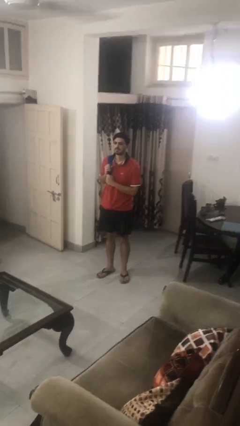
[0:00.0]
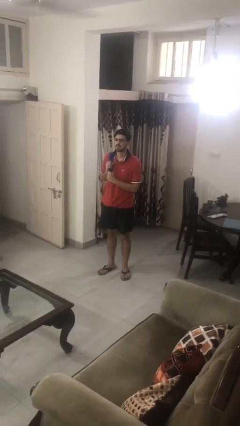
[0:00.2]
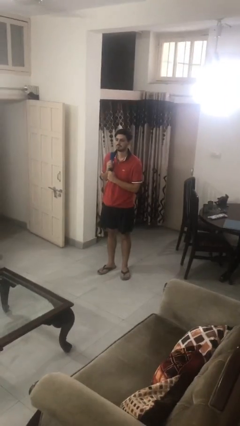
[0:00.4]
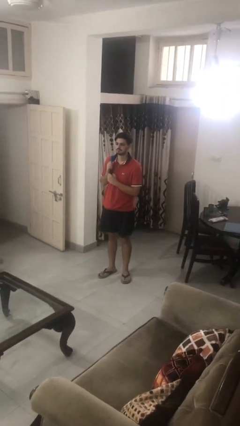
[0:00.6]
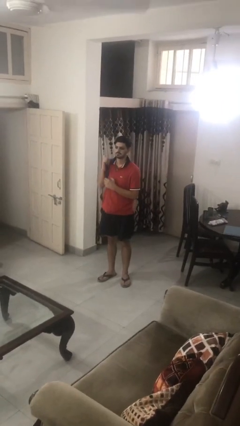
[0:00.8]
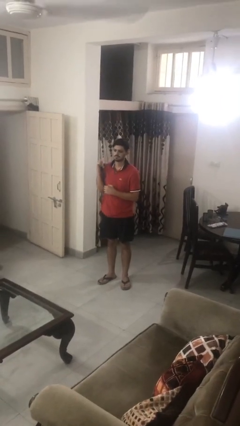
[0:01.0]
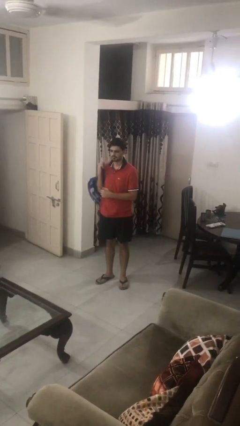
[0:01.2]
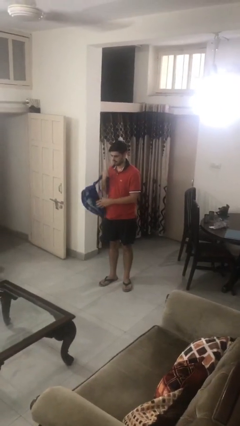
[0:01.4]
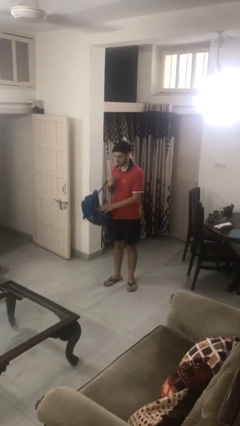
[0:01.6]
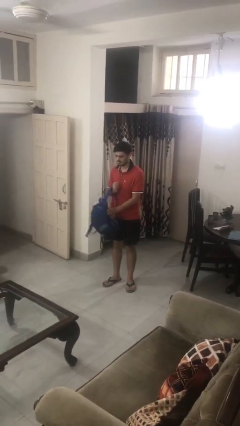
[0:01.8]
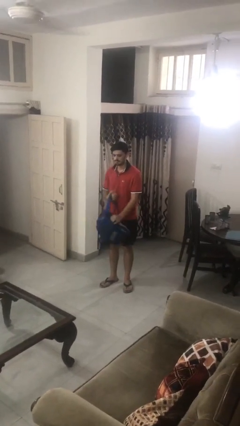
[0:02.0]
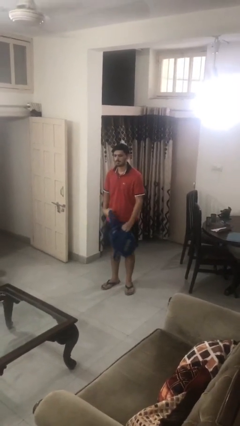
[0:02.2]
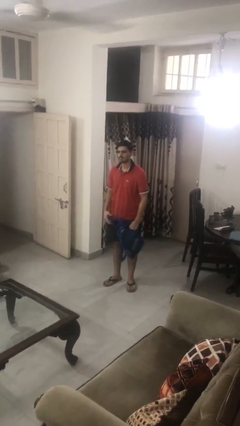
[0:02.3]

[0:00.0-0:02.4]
person takes off backpack

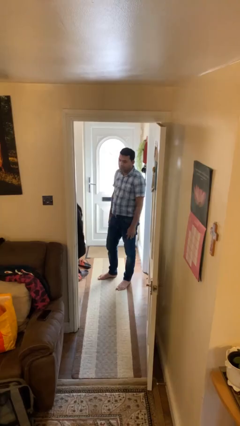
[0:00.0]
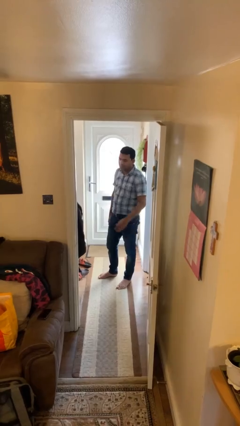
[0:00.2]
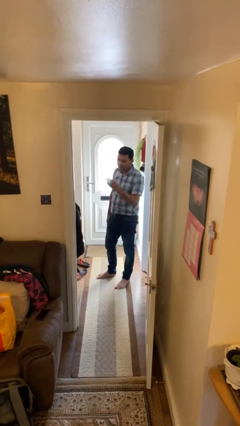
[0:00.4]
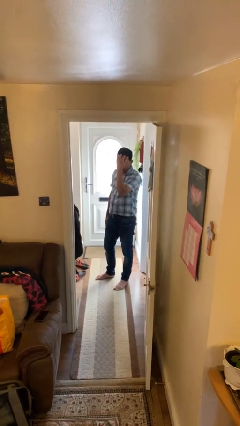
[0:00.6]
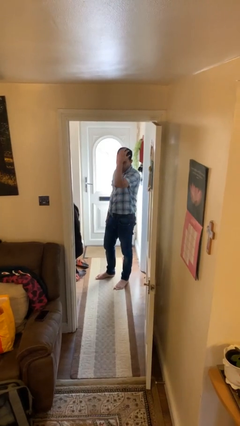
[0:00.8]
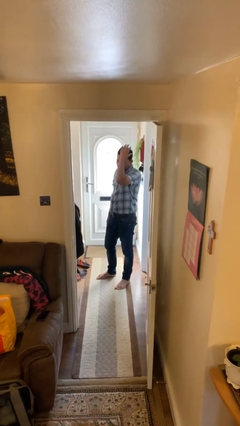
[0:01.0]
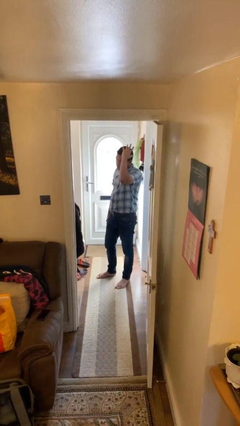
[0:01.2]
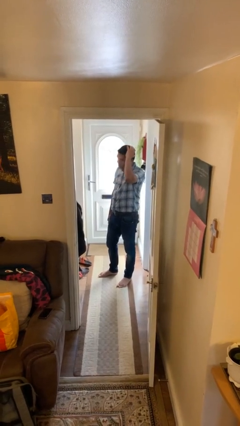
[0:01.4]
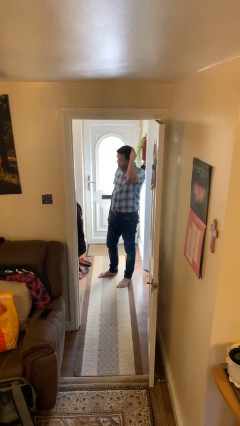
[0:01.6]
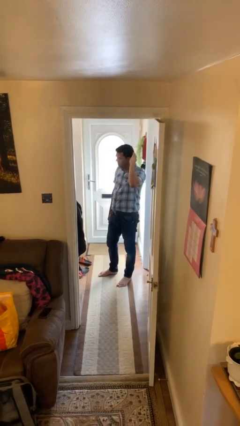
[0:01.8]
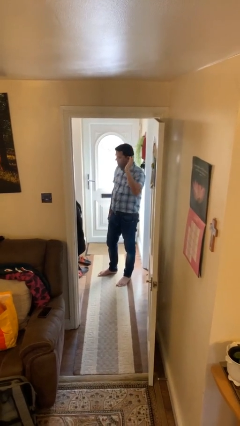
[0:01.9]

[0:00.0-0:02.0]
person strokes hair

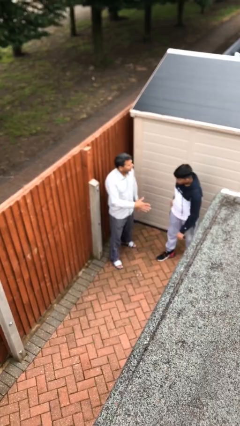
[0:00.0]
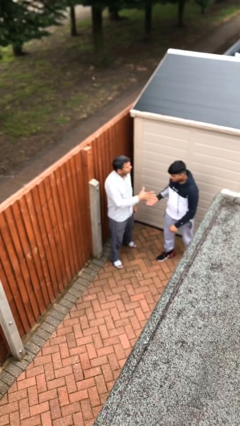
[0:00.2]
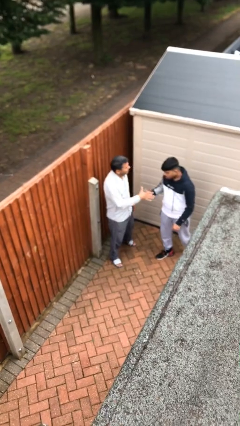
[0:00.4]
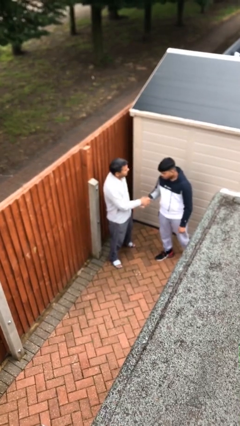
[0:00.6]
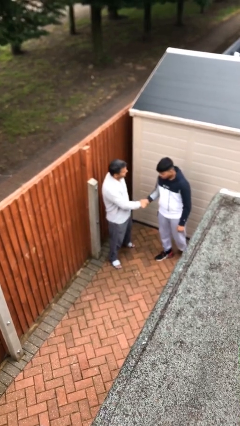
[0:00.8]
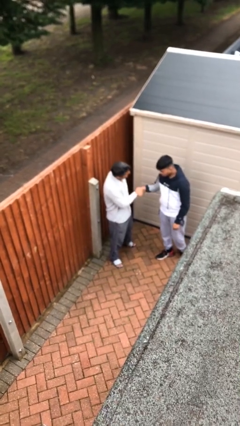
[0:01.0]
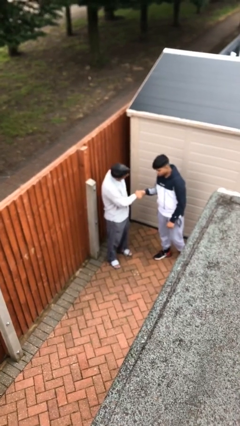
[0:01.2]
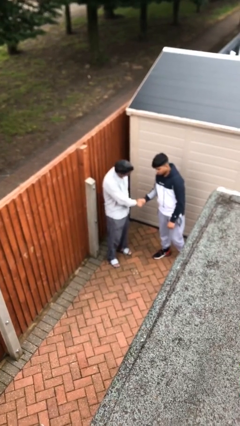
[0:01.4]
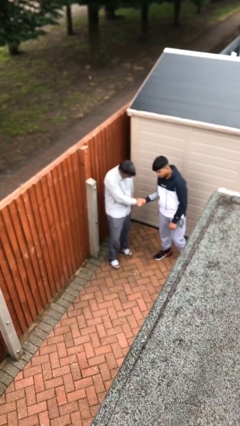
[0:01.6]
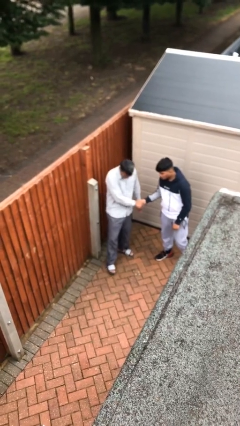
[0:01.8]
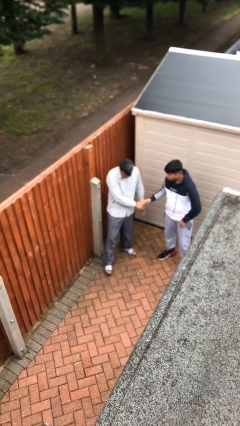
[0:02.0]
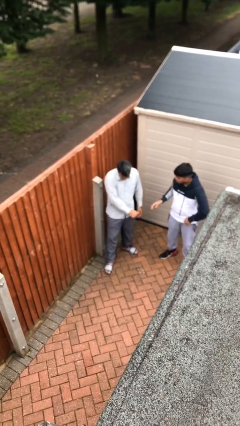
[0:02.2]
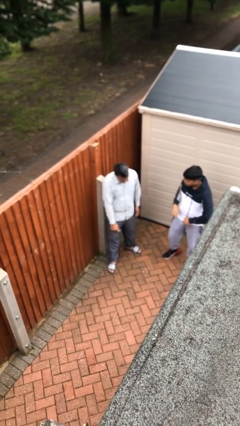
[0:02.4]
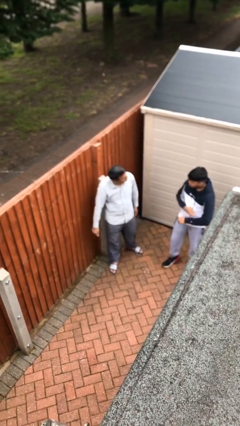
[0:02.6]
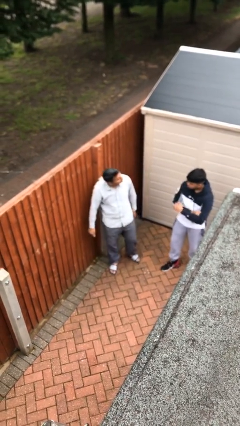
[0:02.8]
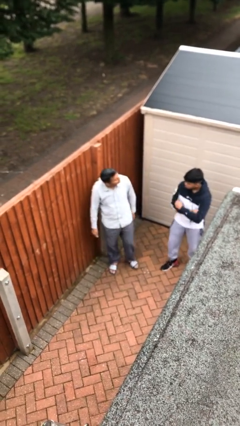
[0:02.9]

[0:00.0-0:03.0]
person shakes hand

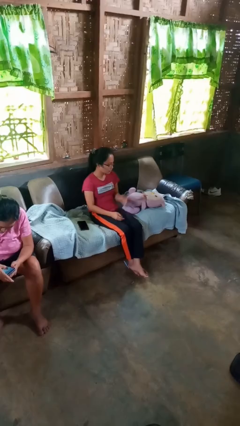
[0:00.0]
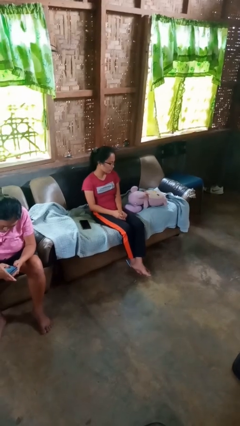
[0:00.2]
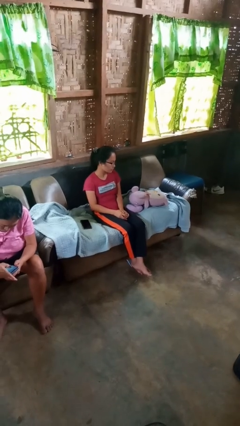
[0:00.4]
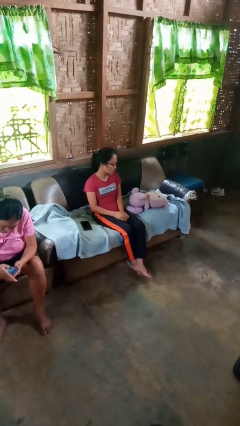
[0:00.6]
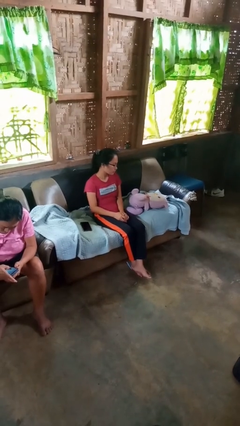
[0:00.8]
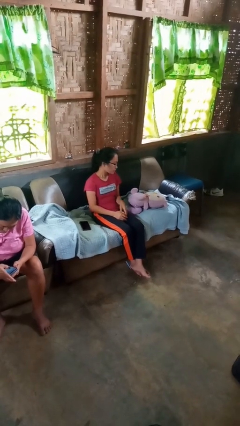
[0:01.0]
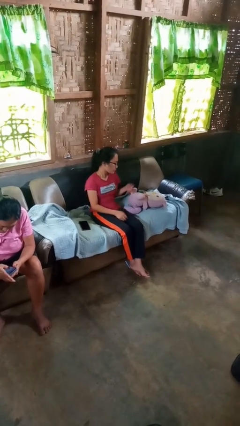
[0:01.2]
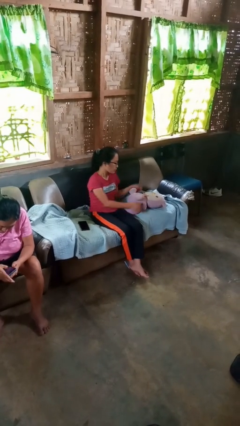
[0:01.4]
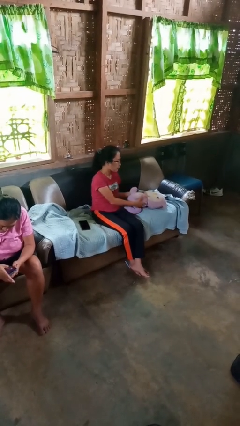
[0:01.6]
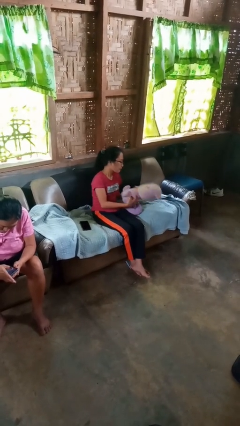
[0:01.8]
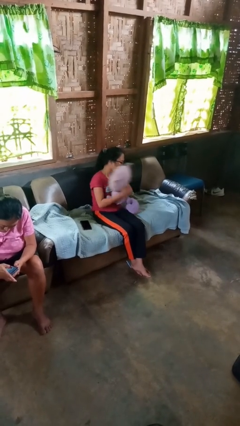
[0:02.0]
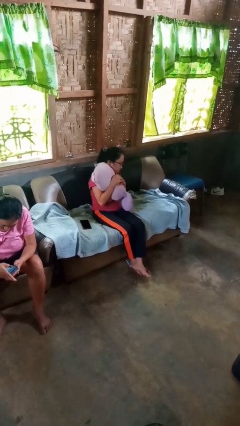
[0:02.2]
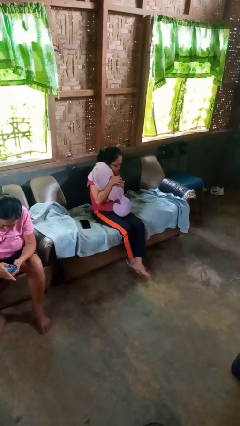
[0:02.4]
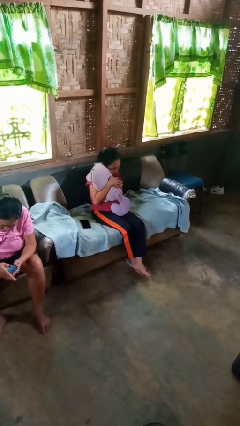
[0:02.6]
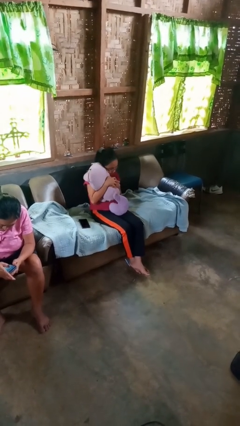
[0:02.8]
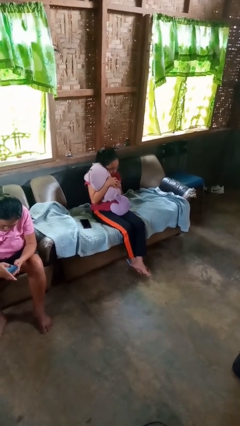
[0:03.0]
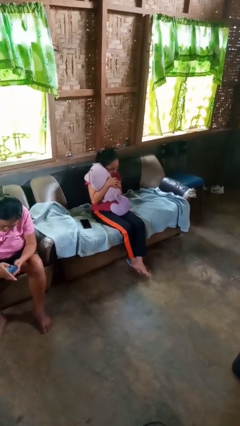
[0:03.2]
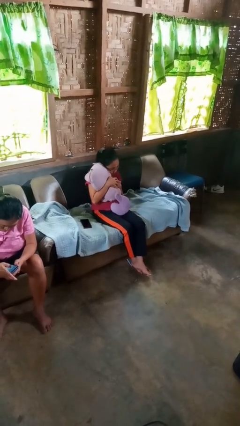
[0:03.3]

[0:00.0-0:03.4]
person hugs stuffed animal

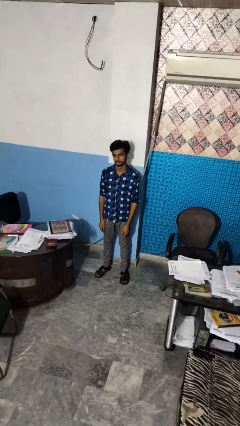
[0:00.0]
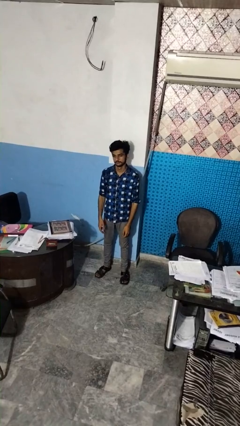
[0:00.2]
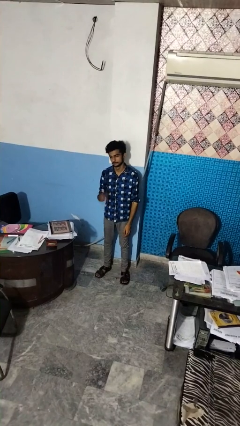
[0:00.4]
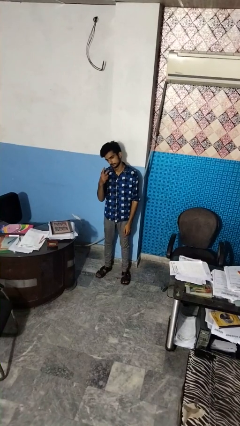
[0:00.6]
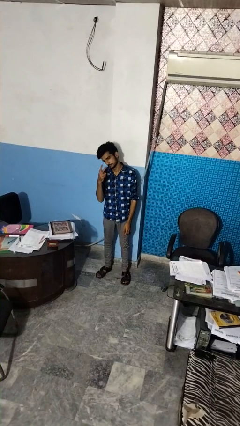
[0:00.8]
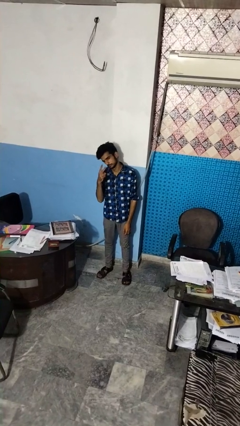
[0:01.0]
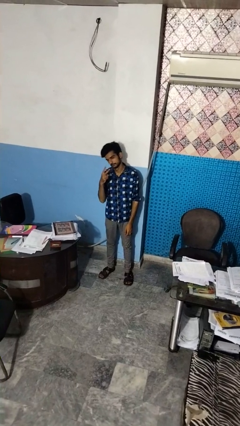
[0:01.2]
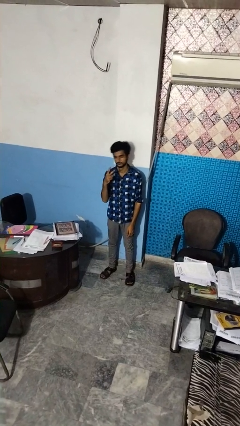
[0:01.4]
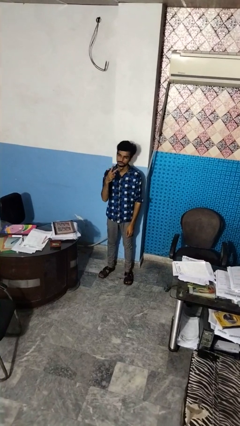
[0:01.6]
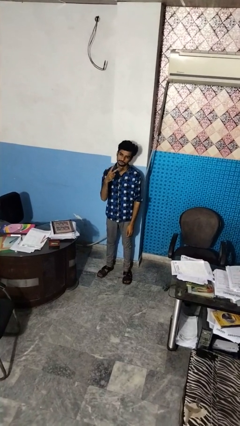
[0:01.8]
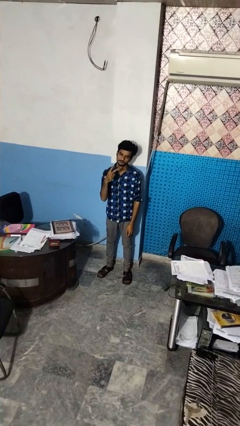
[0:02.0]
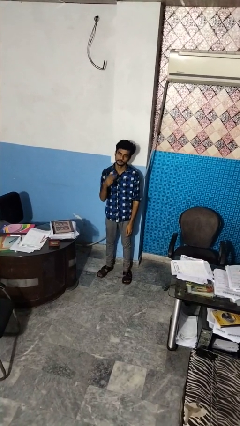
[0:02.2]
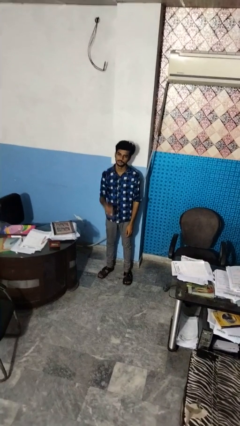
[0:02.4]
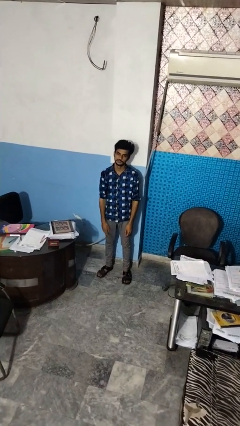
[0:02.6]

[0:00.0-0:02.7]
person gestures peace

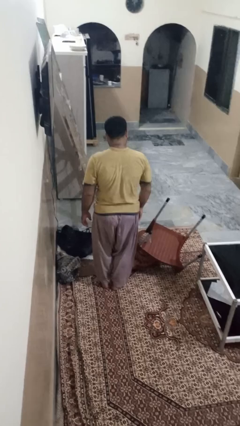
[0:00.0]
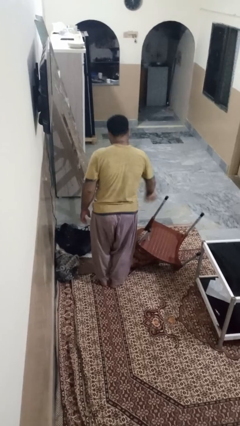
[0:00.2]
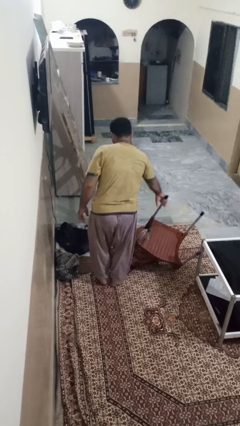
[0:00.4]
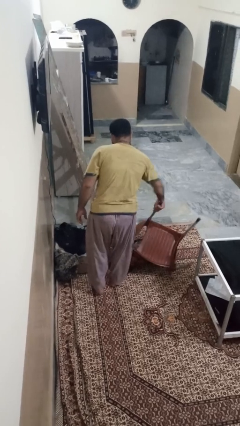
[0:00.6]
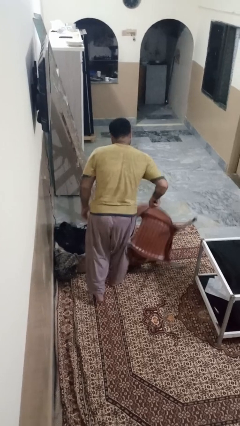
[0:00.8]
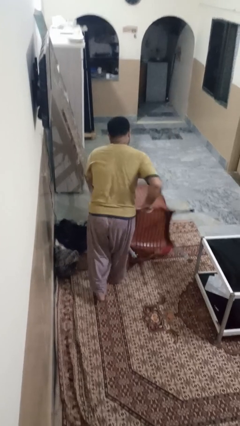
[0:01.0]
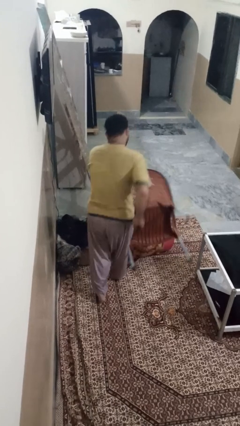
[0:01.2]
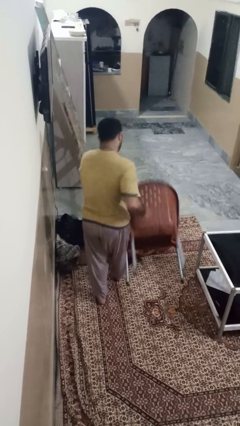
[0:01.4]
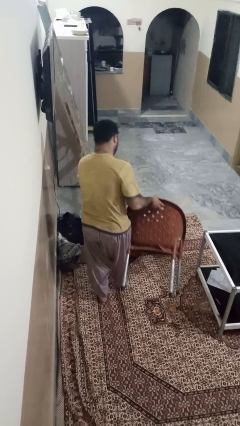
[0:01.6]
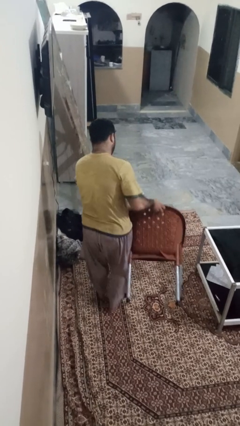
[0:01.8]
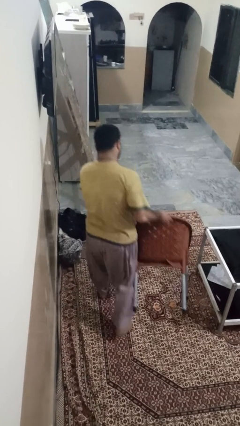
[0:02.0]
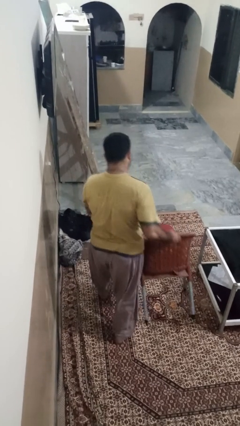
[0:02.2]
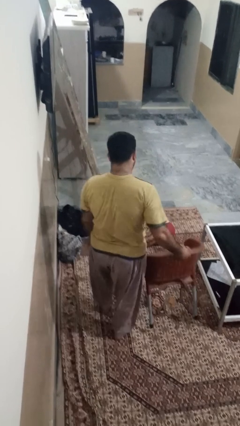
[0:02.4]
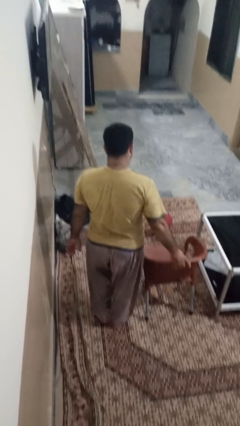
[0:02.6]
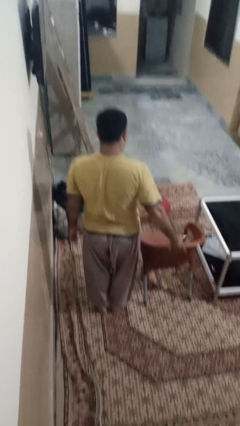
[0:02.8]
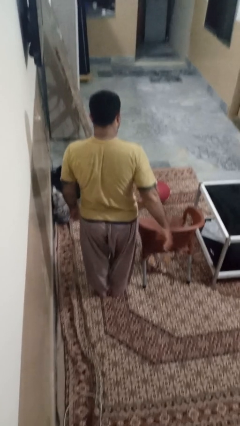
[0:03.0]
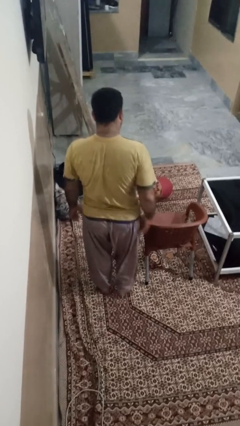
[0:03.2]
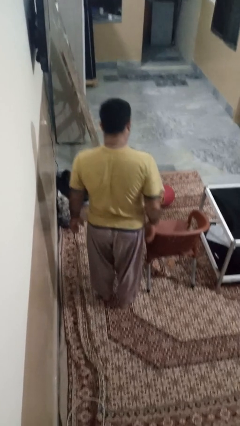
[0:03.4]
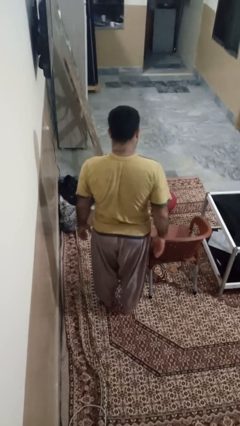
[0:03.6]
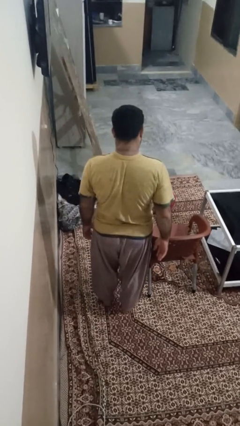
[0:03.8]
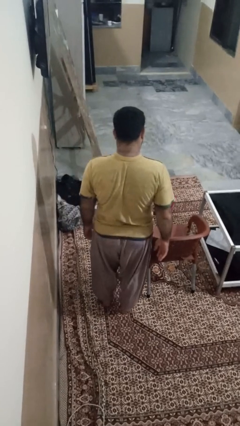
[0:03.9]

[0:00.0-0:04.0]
person sets upright furniture
